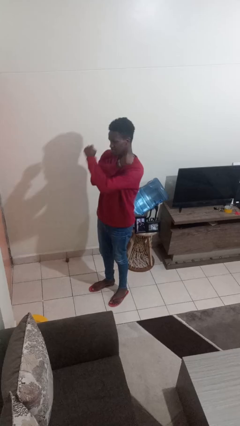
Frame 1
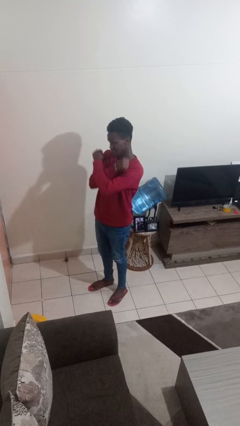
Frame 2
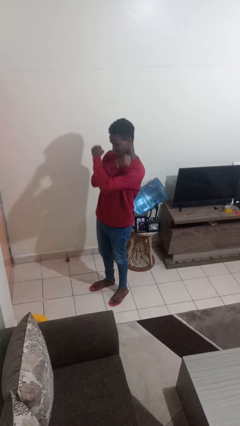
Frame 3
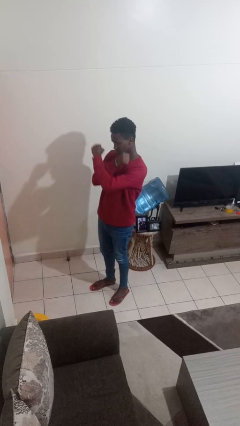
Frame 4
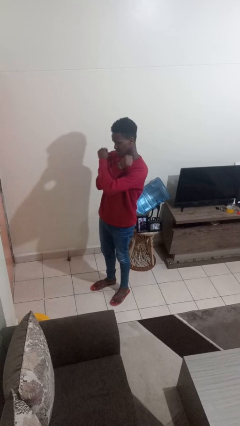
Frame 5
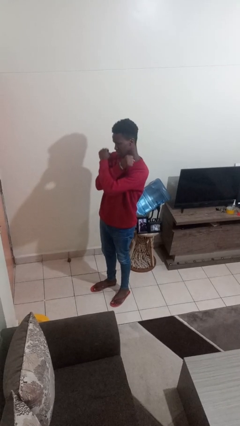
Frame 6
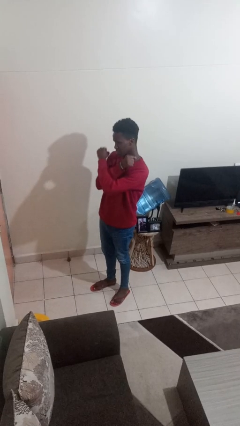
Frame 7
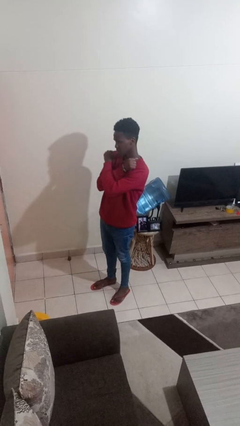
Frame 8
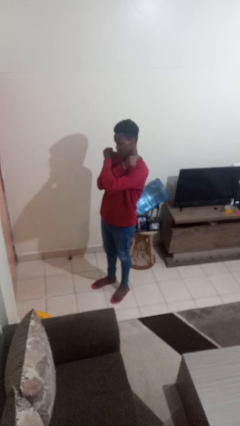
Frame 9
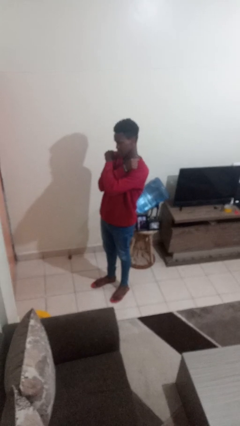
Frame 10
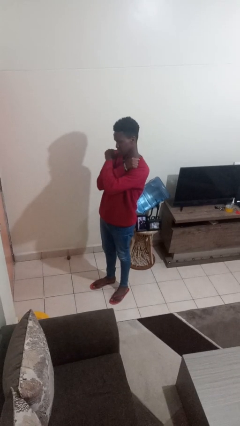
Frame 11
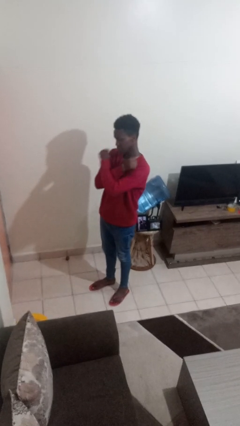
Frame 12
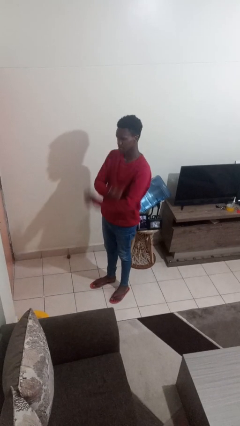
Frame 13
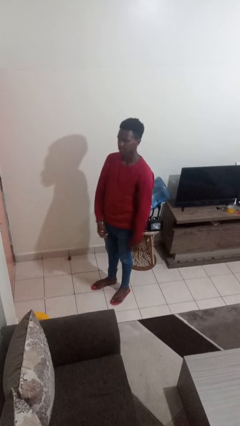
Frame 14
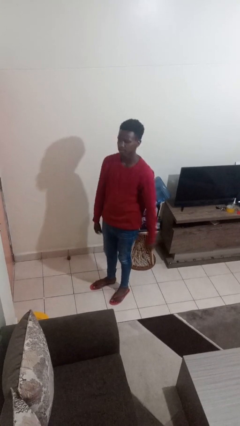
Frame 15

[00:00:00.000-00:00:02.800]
person gestures arms x

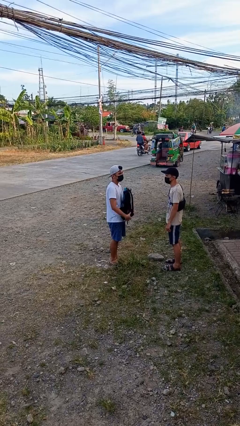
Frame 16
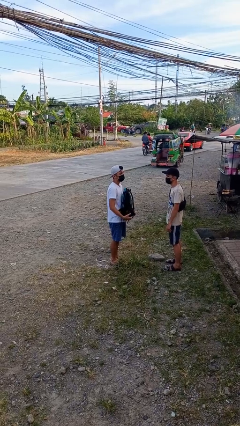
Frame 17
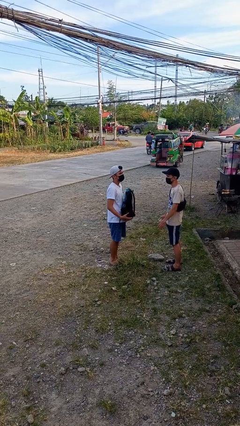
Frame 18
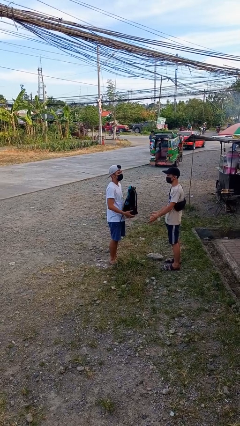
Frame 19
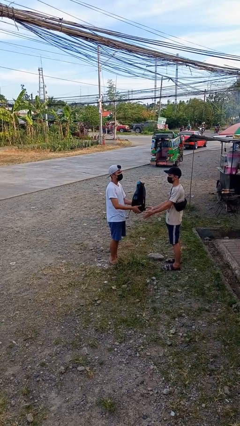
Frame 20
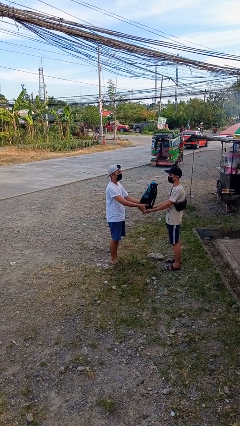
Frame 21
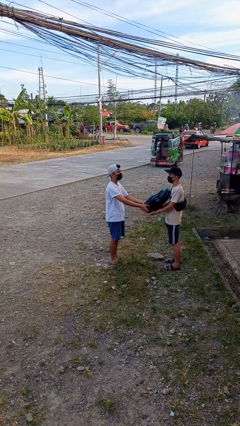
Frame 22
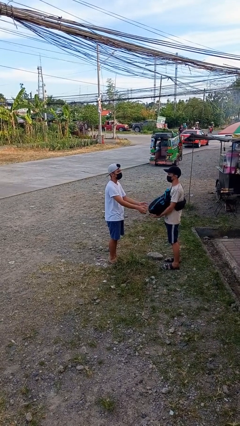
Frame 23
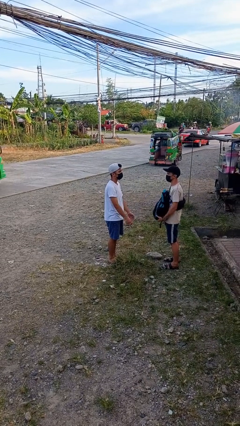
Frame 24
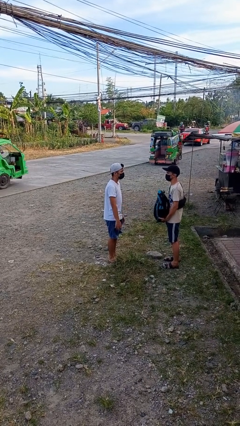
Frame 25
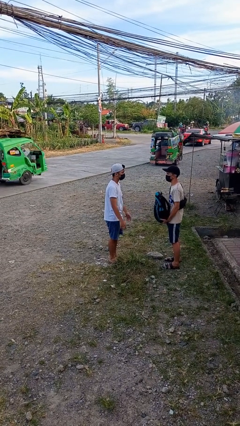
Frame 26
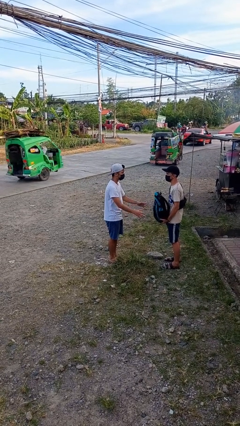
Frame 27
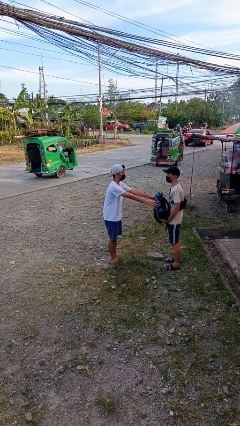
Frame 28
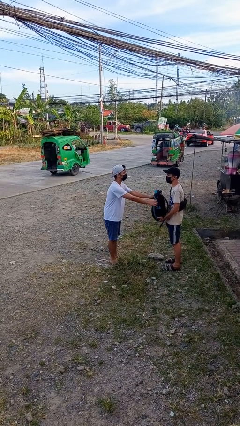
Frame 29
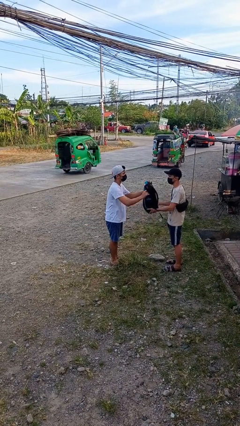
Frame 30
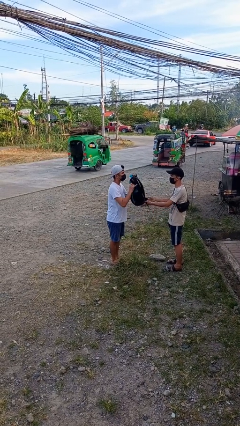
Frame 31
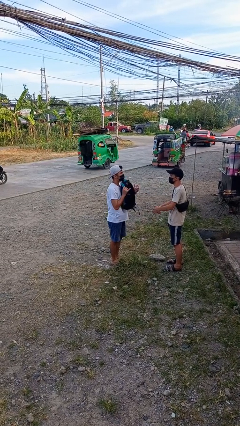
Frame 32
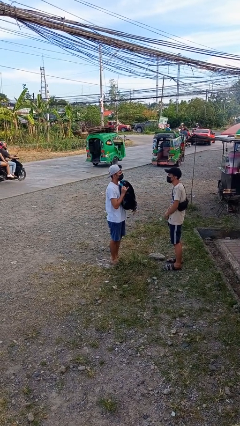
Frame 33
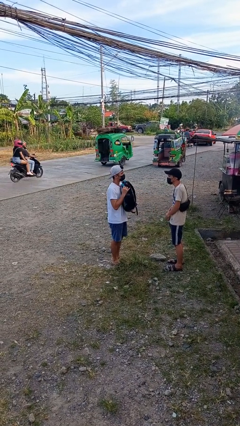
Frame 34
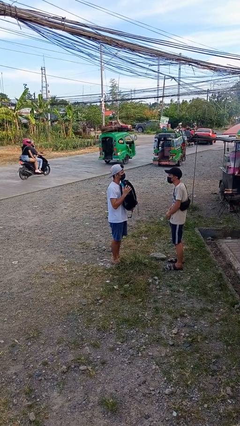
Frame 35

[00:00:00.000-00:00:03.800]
person transfers object to person

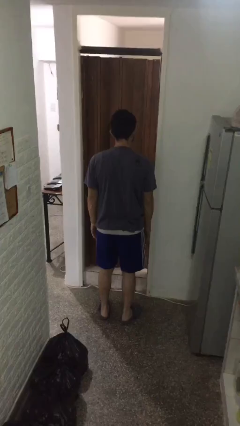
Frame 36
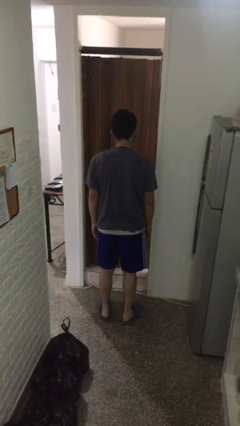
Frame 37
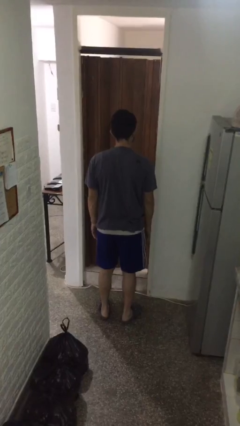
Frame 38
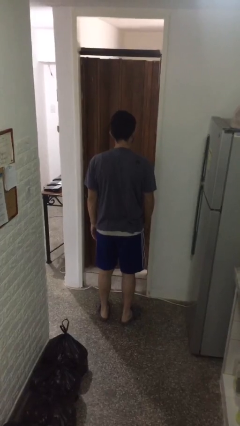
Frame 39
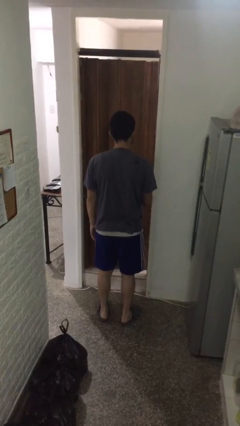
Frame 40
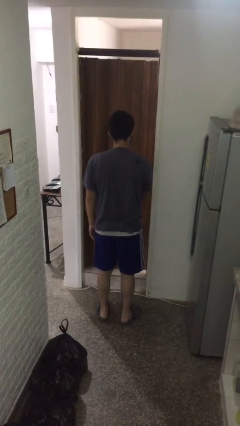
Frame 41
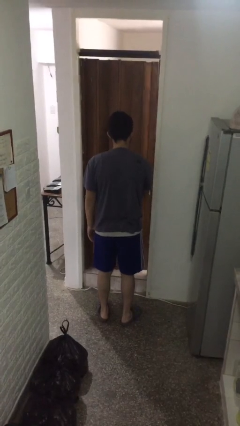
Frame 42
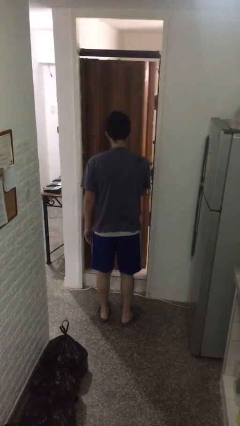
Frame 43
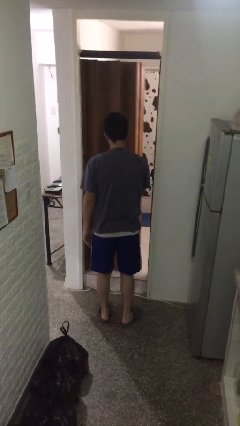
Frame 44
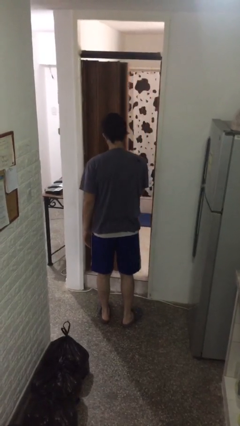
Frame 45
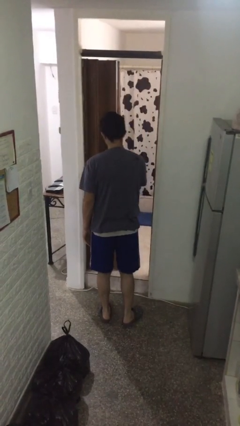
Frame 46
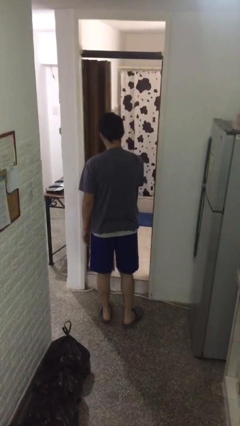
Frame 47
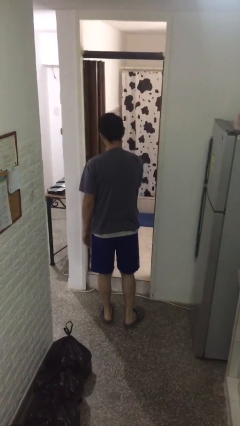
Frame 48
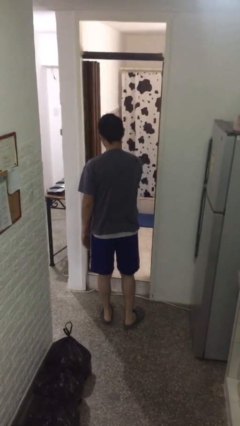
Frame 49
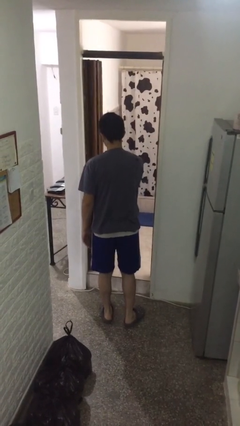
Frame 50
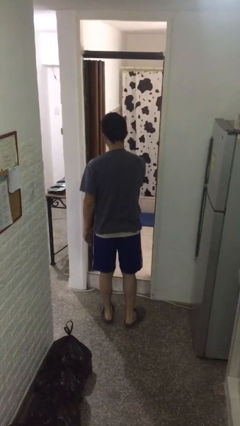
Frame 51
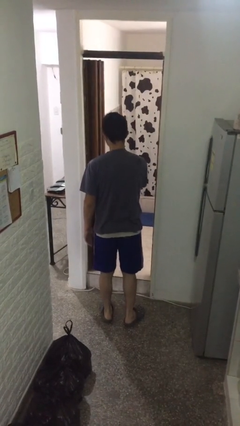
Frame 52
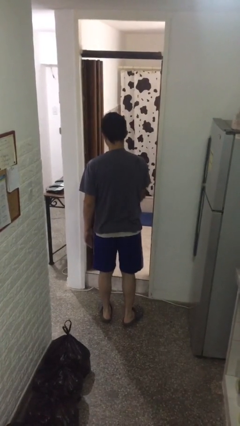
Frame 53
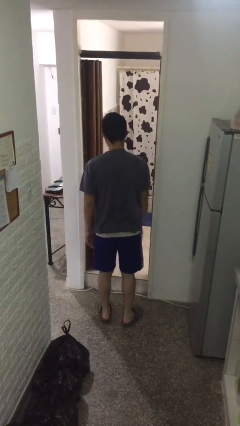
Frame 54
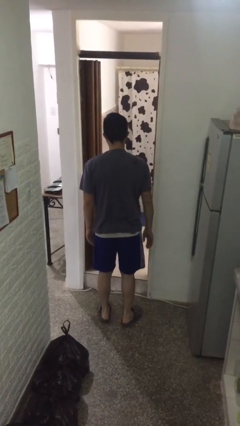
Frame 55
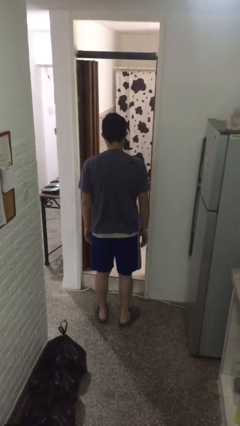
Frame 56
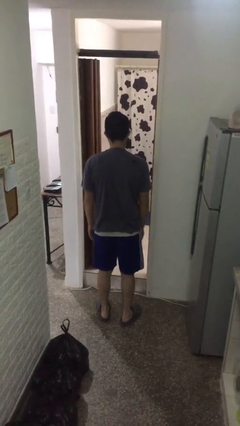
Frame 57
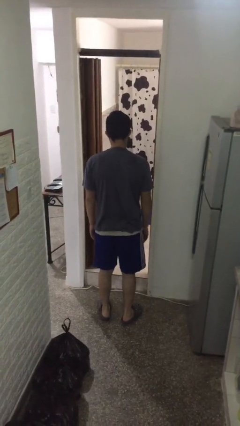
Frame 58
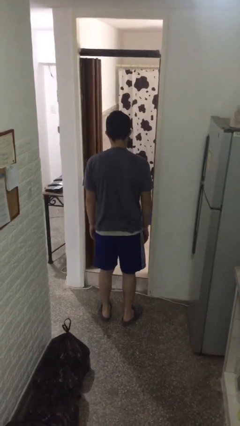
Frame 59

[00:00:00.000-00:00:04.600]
person opens sliding door

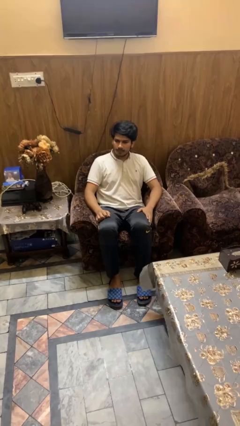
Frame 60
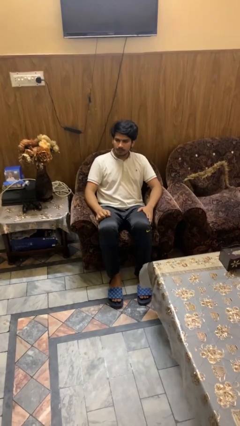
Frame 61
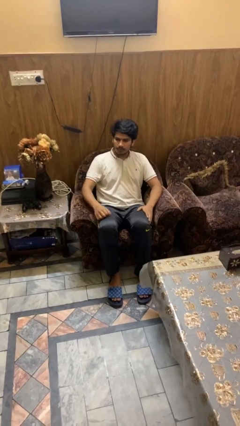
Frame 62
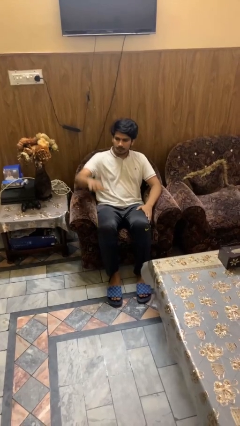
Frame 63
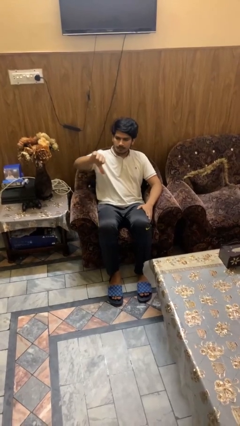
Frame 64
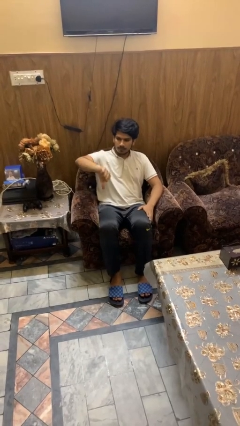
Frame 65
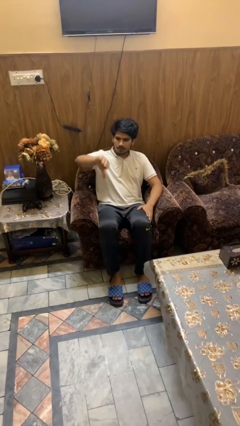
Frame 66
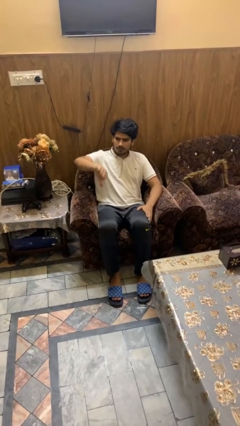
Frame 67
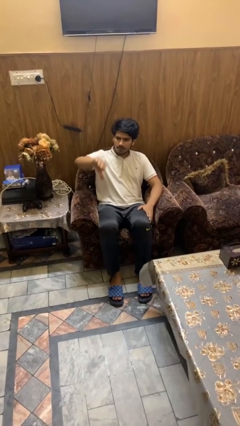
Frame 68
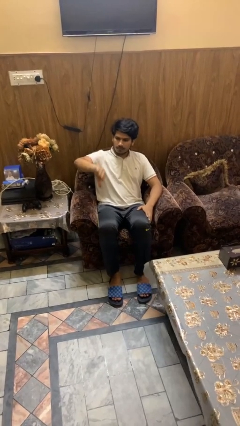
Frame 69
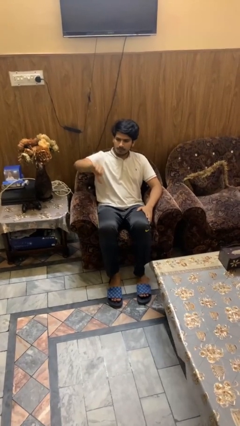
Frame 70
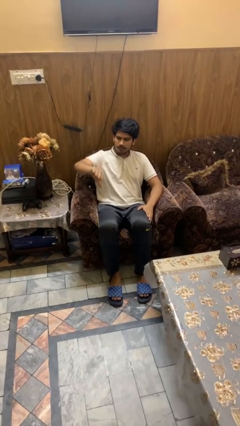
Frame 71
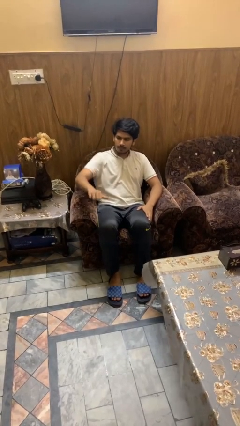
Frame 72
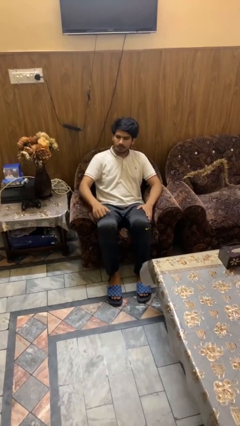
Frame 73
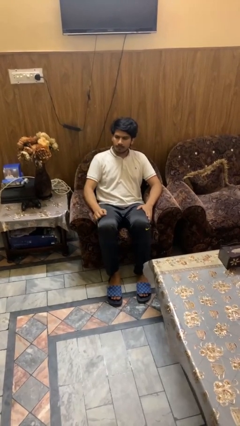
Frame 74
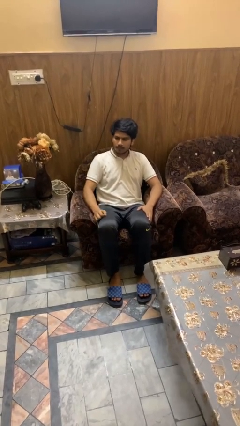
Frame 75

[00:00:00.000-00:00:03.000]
person gestures thumbs down

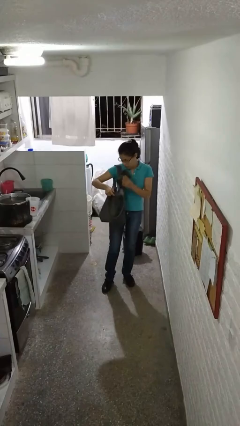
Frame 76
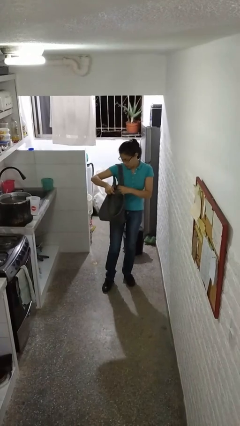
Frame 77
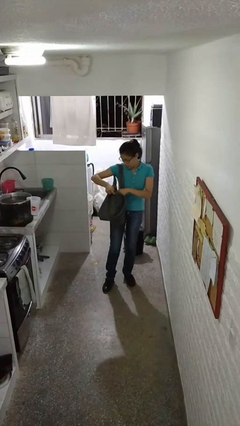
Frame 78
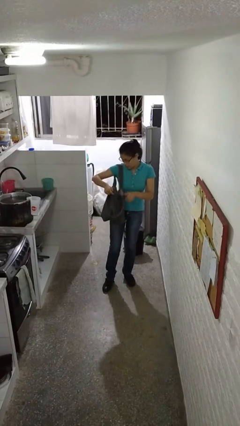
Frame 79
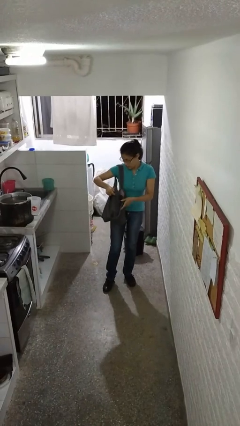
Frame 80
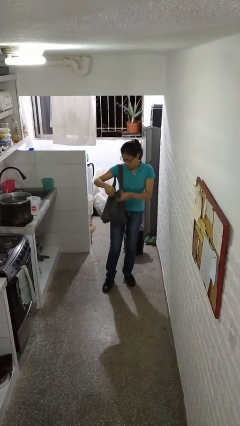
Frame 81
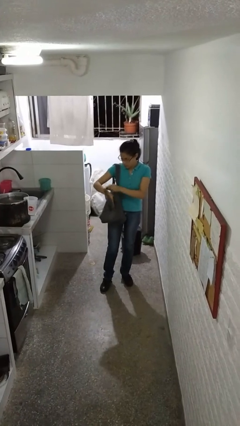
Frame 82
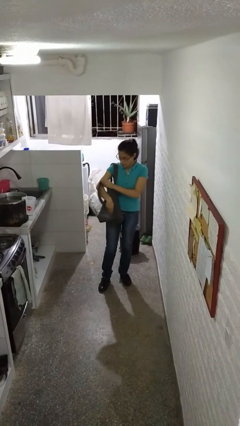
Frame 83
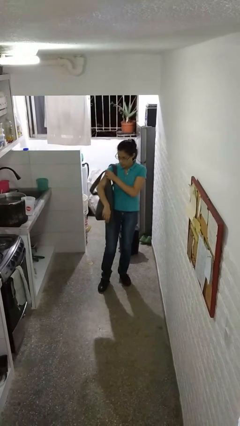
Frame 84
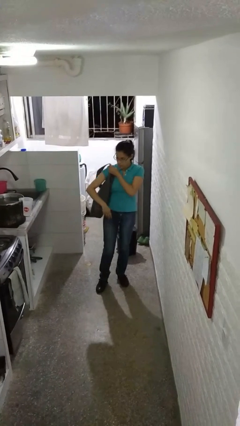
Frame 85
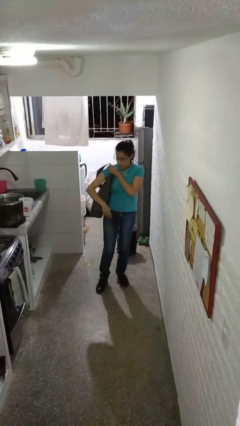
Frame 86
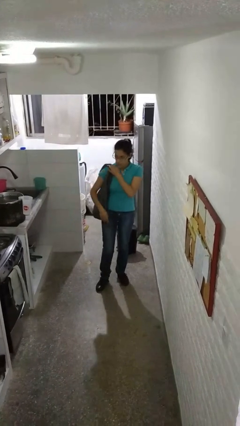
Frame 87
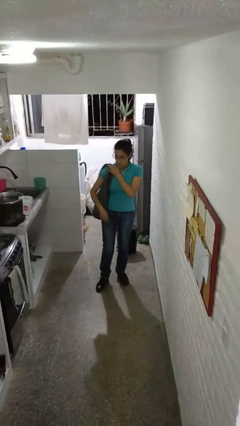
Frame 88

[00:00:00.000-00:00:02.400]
person puts object into purse

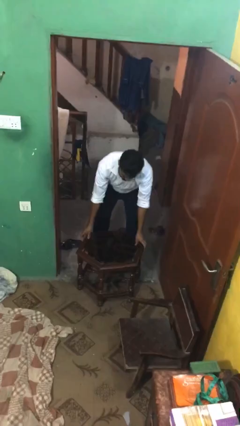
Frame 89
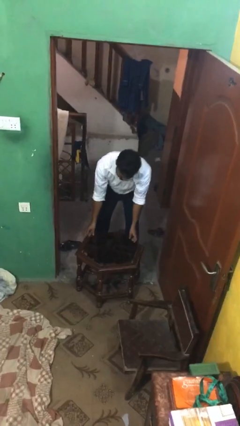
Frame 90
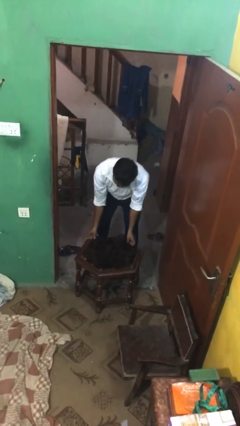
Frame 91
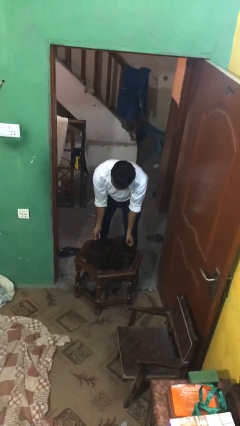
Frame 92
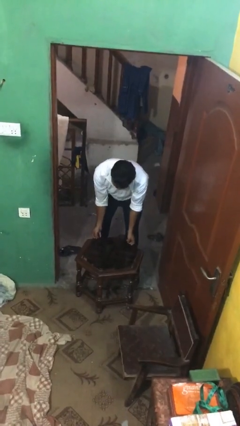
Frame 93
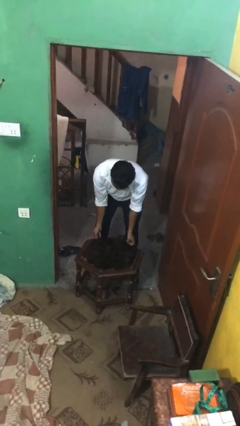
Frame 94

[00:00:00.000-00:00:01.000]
person puts down object on floor
